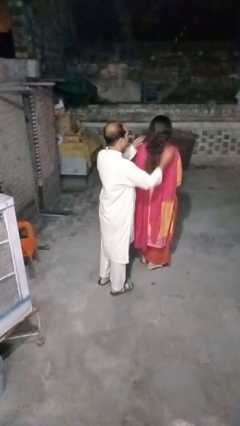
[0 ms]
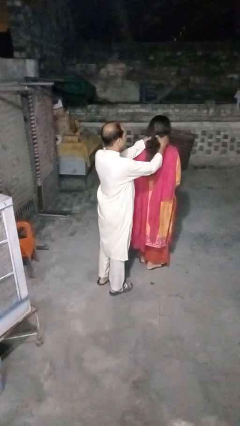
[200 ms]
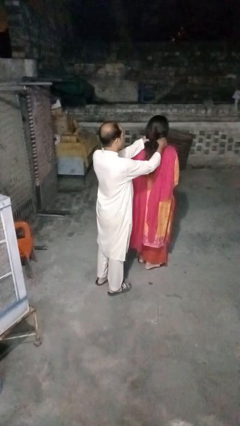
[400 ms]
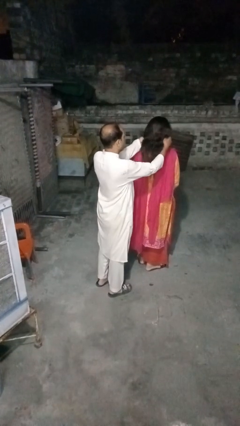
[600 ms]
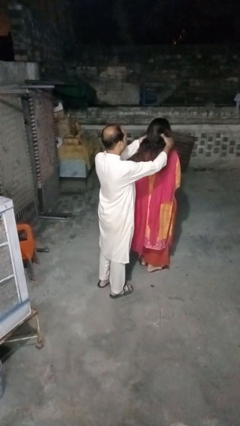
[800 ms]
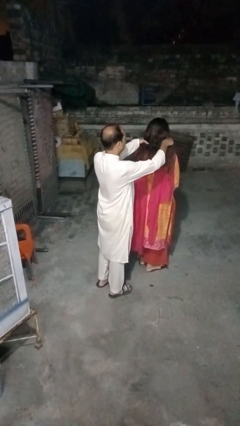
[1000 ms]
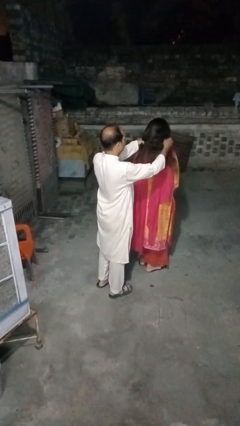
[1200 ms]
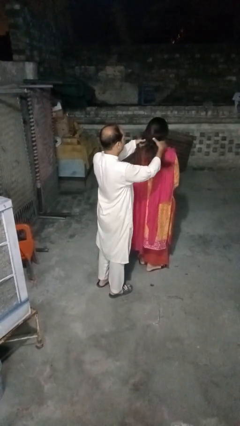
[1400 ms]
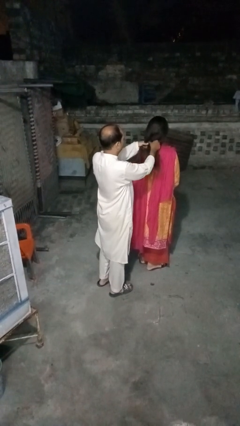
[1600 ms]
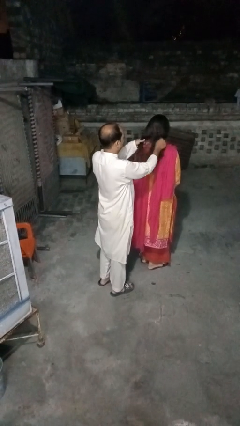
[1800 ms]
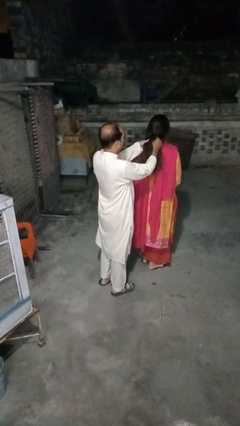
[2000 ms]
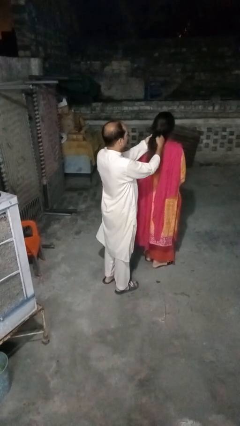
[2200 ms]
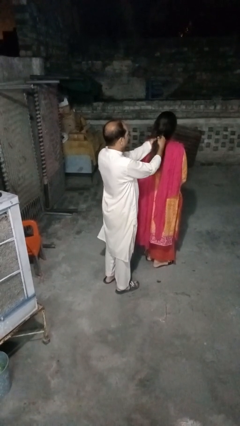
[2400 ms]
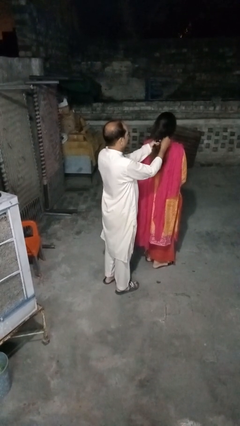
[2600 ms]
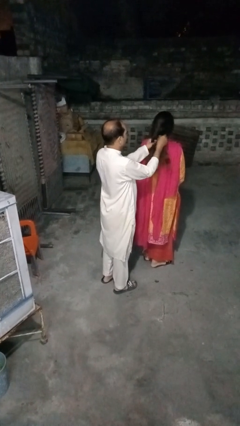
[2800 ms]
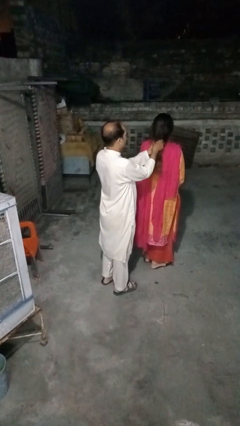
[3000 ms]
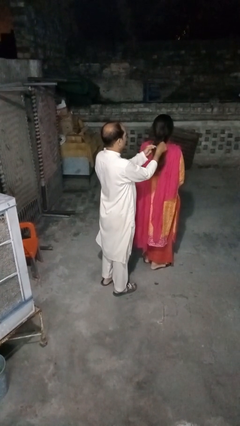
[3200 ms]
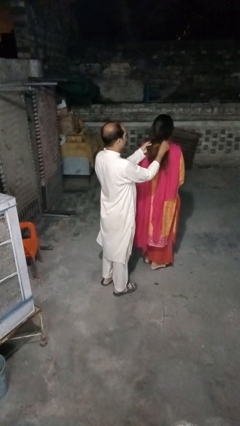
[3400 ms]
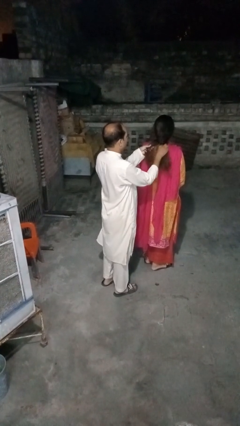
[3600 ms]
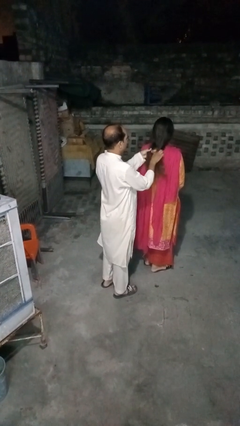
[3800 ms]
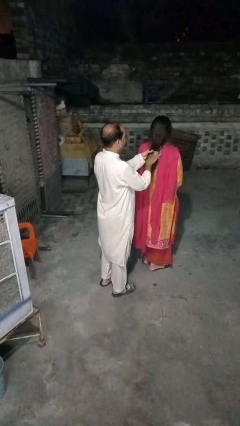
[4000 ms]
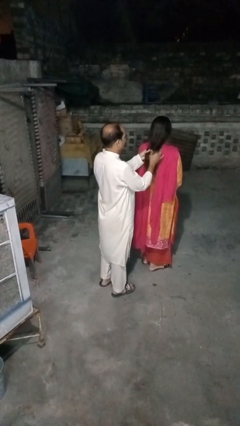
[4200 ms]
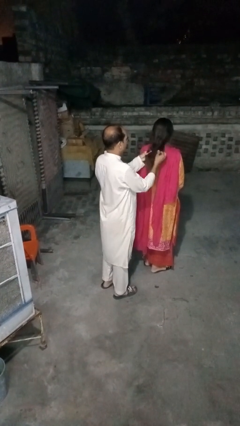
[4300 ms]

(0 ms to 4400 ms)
person braids hair of person

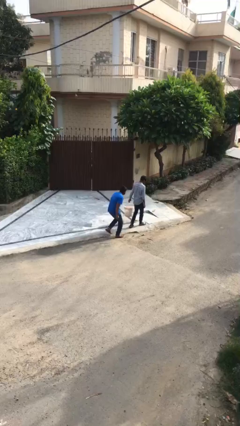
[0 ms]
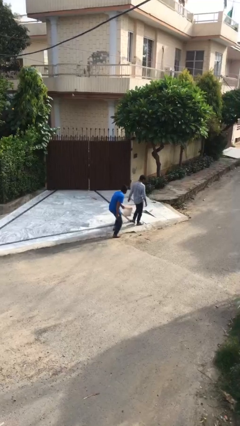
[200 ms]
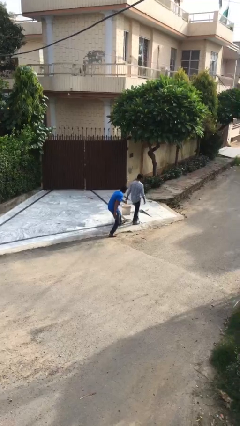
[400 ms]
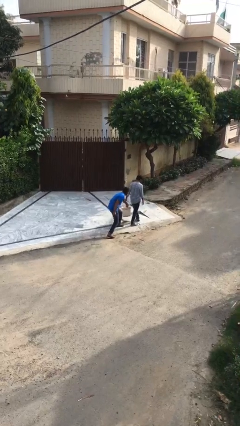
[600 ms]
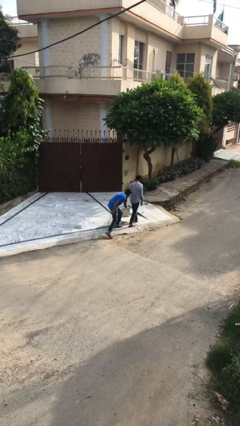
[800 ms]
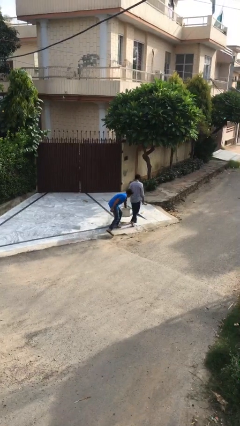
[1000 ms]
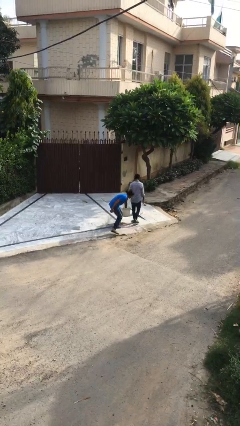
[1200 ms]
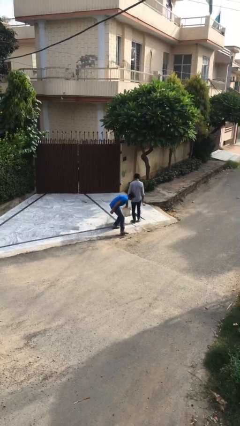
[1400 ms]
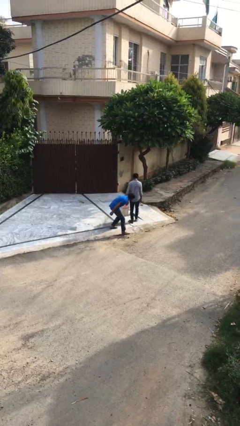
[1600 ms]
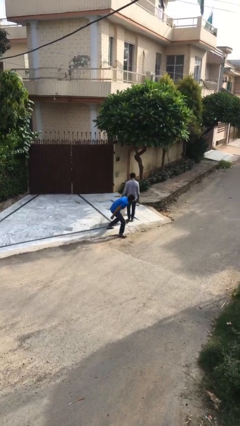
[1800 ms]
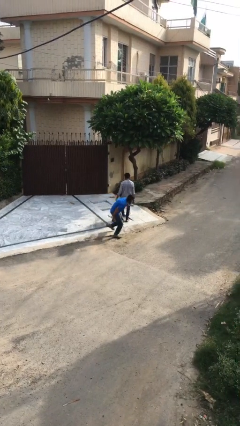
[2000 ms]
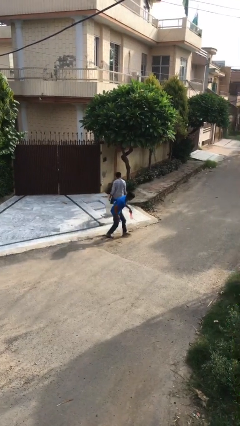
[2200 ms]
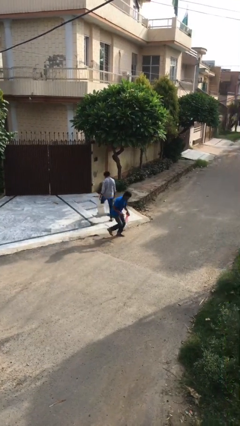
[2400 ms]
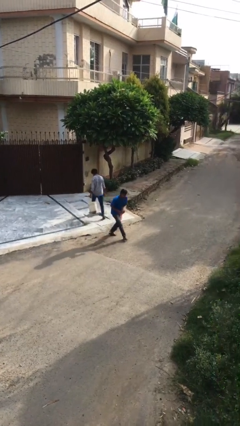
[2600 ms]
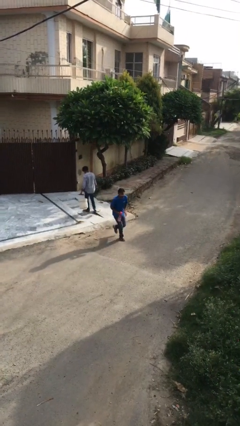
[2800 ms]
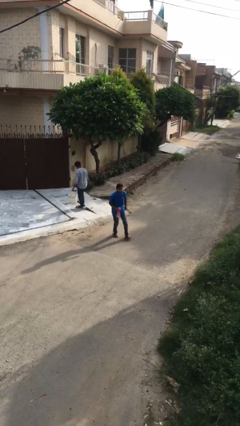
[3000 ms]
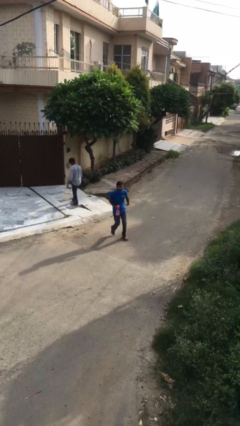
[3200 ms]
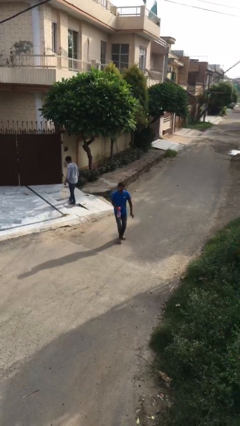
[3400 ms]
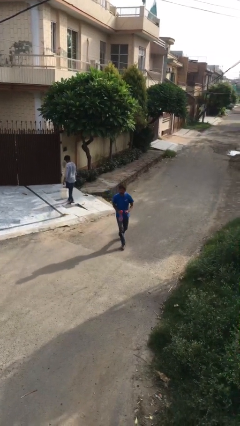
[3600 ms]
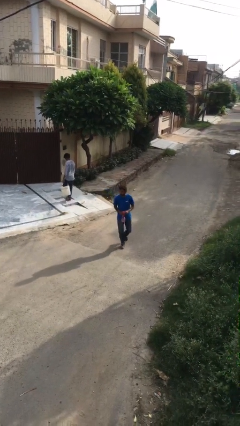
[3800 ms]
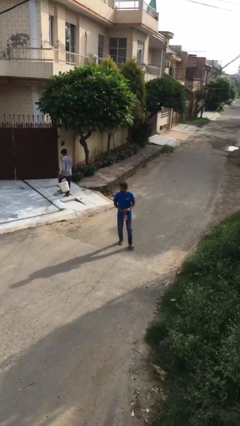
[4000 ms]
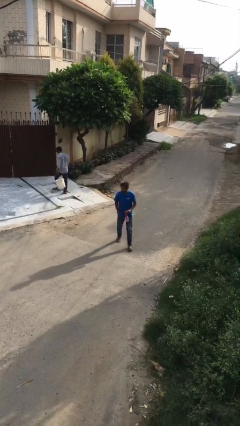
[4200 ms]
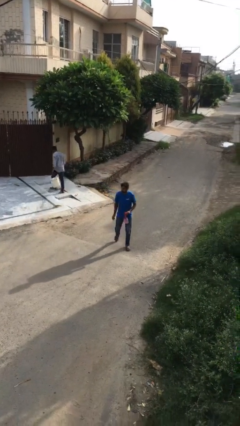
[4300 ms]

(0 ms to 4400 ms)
person steals object from person

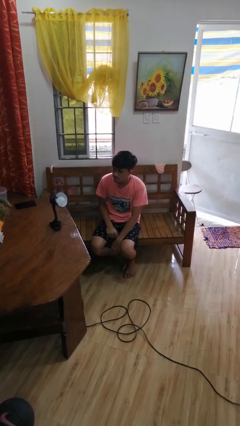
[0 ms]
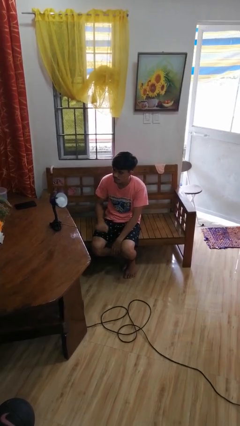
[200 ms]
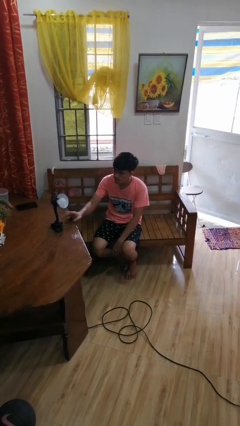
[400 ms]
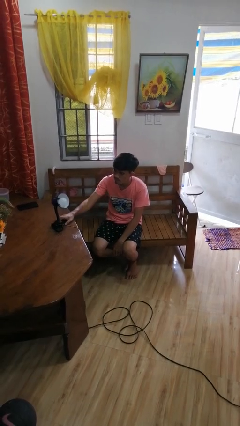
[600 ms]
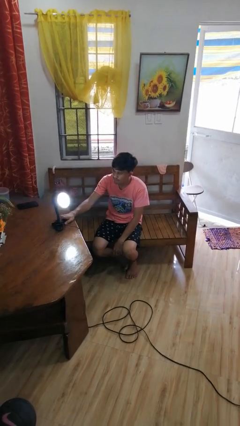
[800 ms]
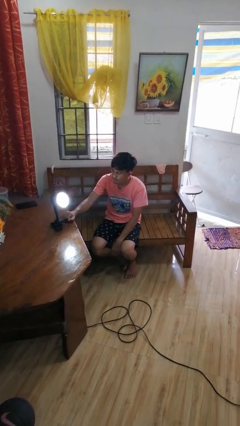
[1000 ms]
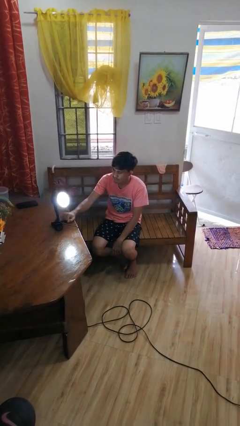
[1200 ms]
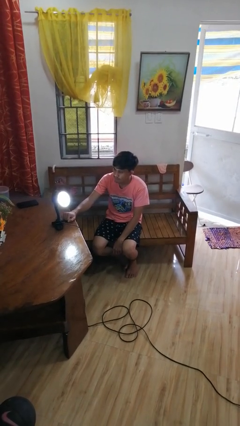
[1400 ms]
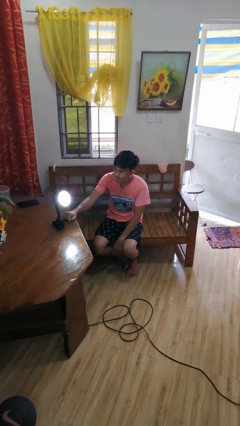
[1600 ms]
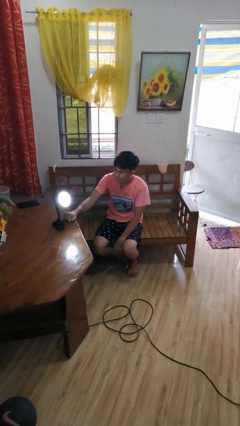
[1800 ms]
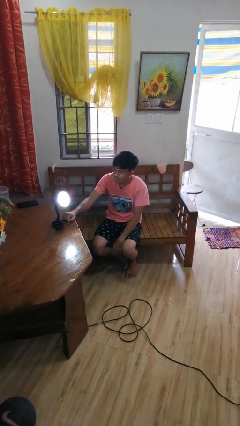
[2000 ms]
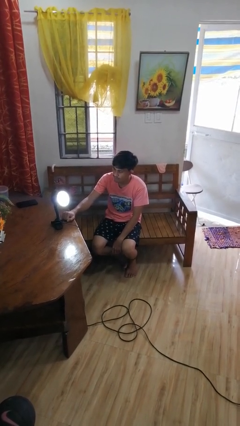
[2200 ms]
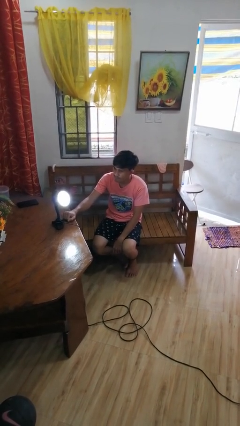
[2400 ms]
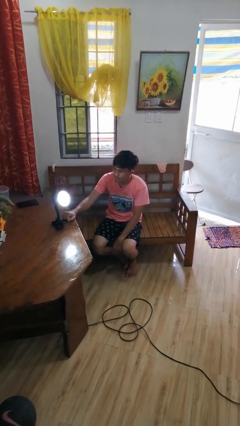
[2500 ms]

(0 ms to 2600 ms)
person turns on lamp

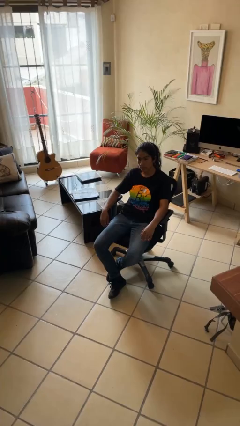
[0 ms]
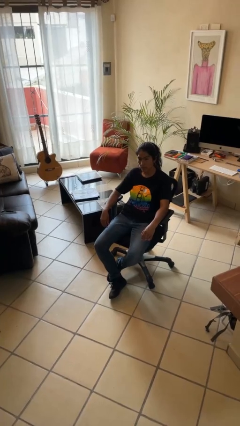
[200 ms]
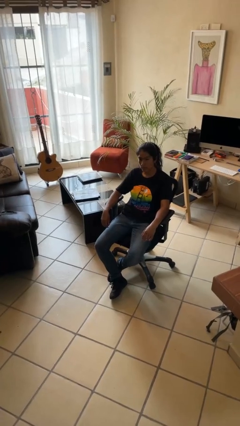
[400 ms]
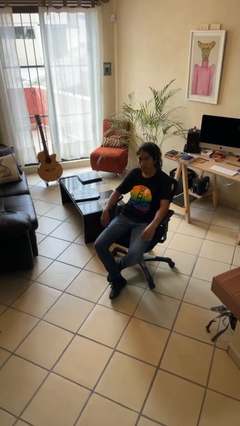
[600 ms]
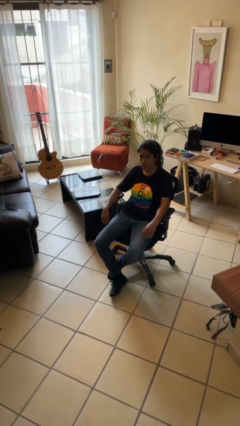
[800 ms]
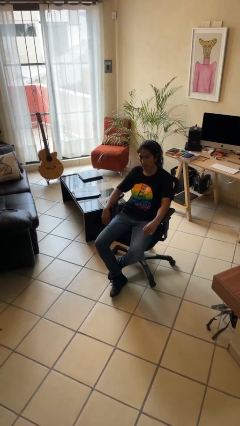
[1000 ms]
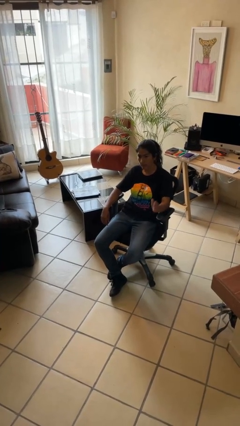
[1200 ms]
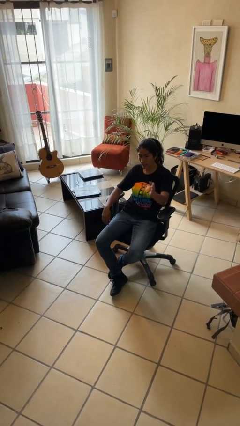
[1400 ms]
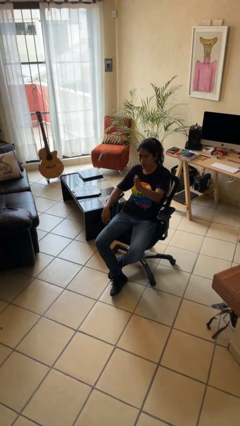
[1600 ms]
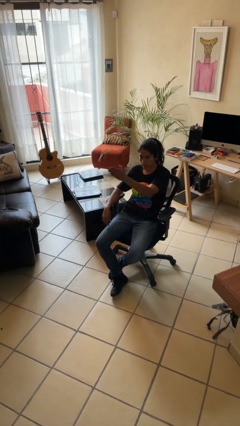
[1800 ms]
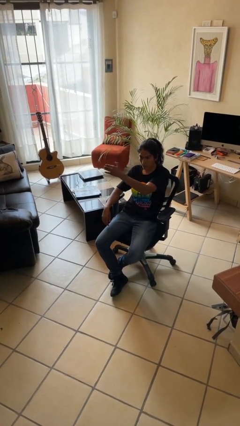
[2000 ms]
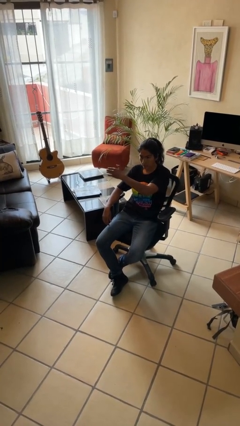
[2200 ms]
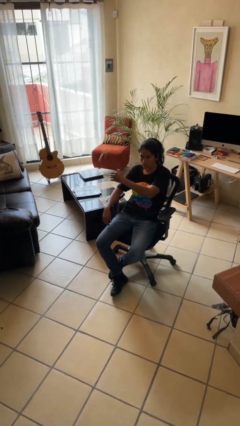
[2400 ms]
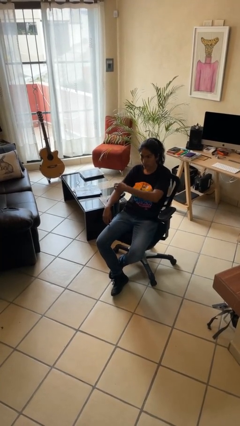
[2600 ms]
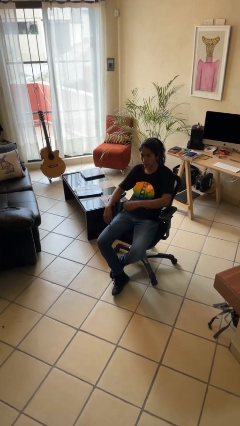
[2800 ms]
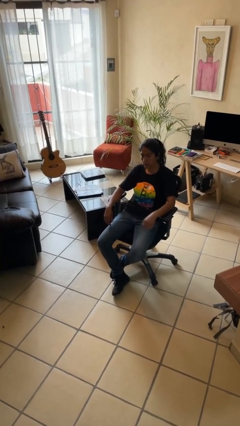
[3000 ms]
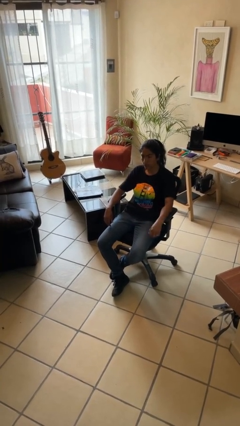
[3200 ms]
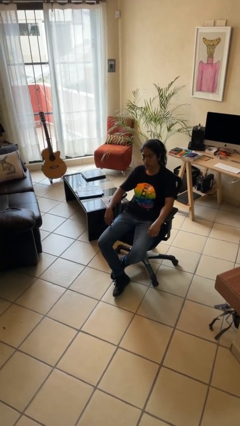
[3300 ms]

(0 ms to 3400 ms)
person gestures swipe right

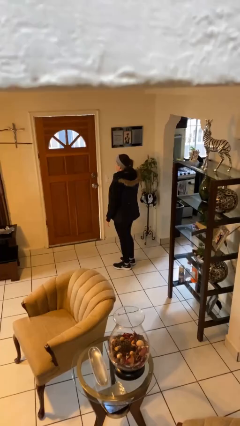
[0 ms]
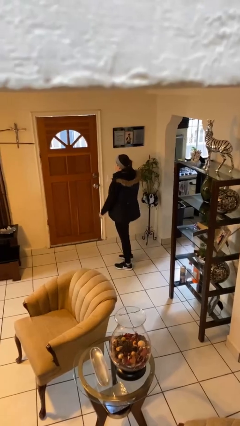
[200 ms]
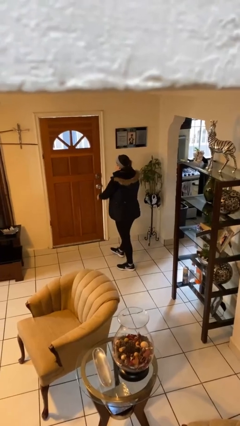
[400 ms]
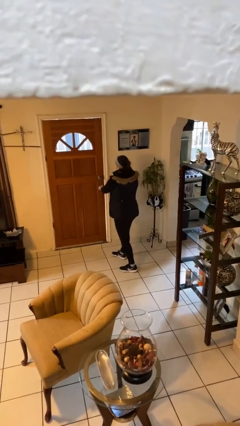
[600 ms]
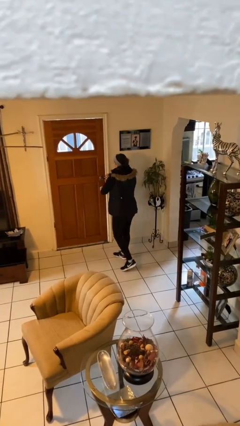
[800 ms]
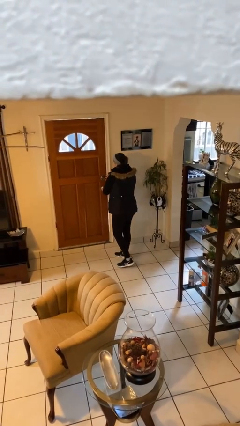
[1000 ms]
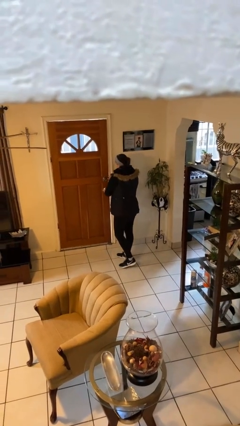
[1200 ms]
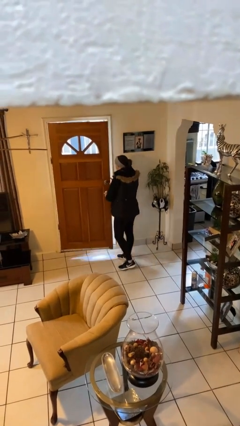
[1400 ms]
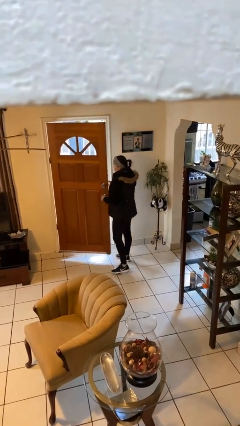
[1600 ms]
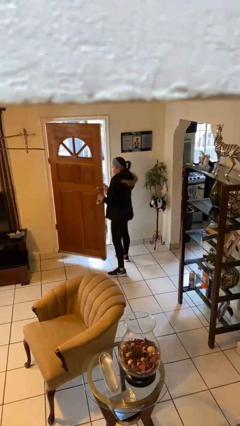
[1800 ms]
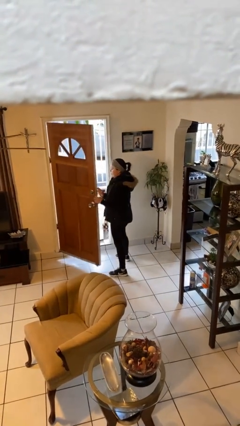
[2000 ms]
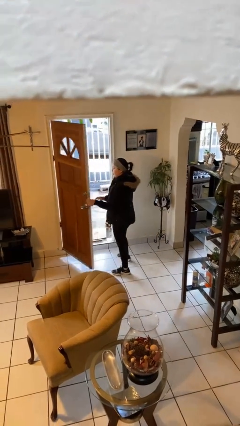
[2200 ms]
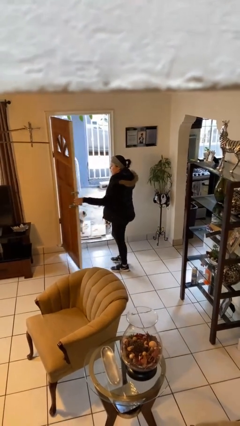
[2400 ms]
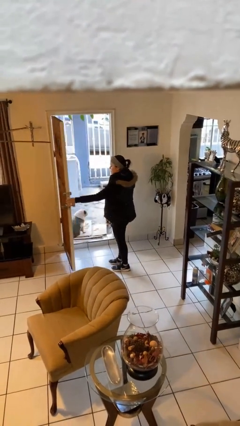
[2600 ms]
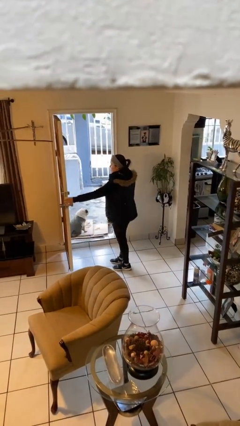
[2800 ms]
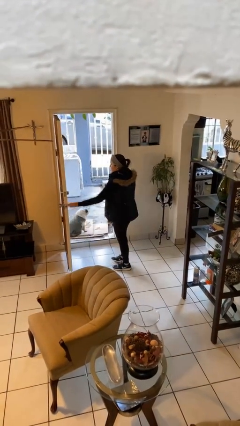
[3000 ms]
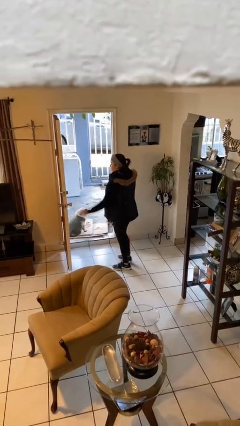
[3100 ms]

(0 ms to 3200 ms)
person opens facility door
